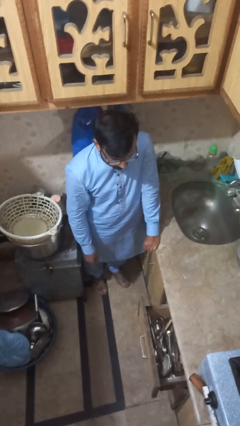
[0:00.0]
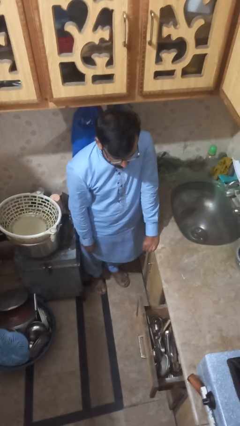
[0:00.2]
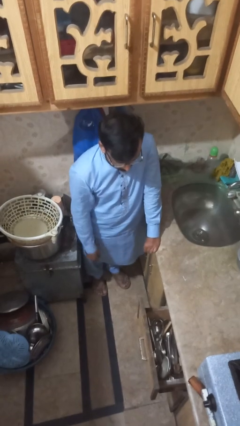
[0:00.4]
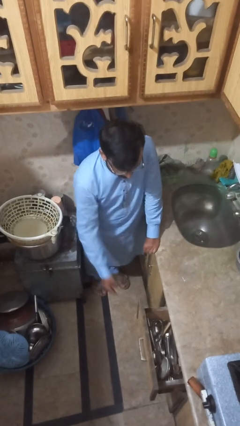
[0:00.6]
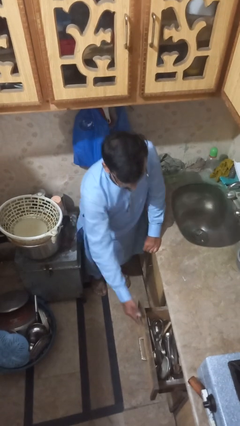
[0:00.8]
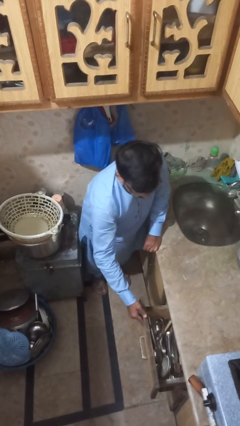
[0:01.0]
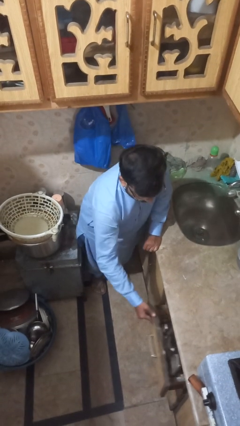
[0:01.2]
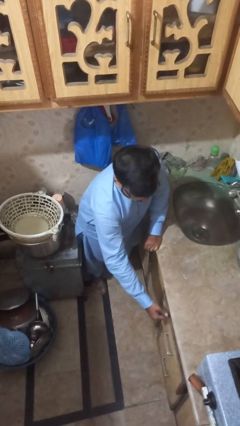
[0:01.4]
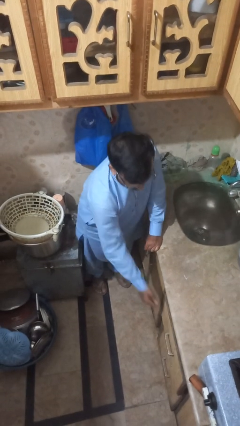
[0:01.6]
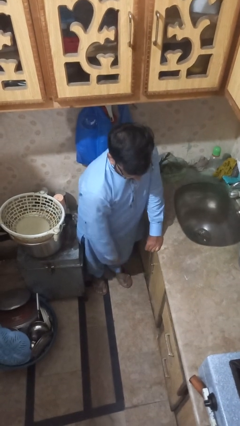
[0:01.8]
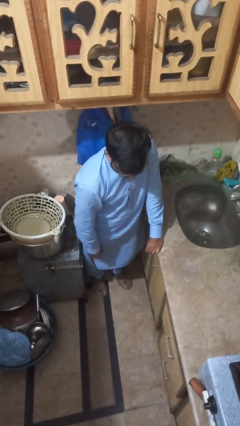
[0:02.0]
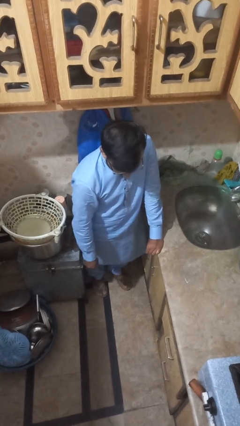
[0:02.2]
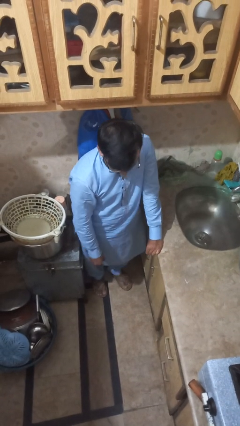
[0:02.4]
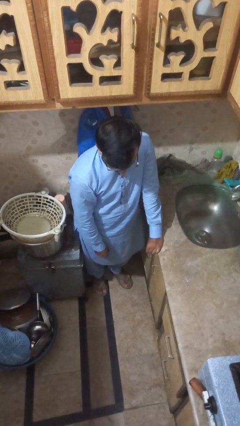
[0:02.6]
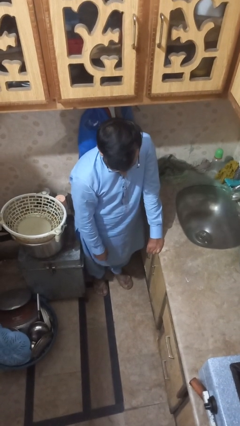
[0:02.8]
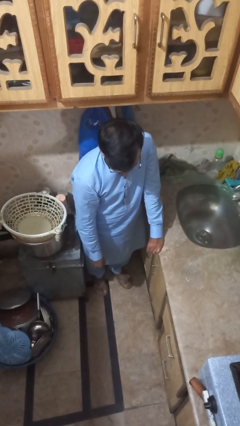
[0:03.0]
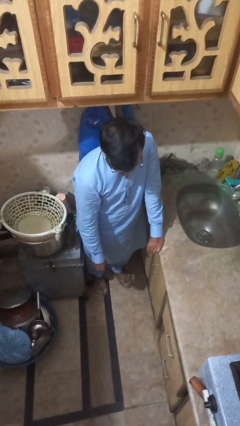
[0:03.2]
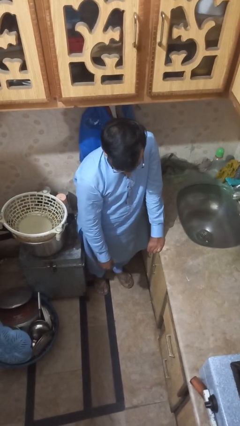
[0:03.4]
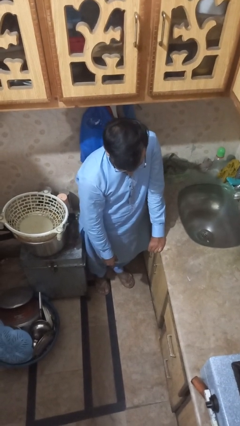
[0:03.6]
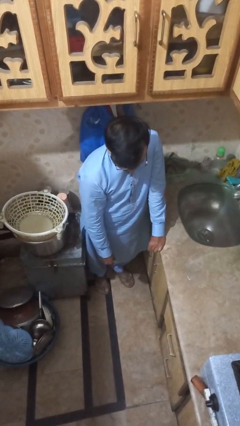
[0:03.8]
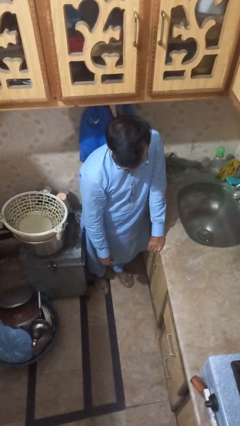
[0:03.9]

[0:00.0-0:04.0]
person closes kitchen drawer

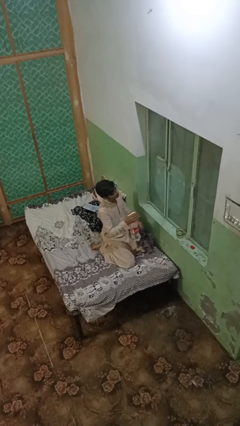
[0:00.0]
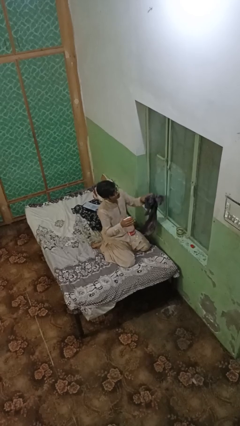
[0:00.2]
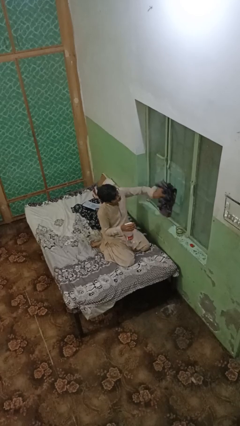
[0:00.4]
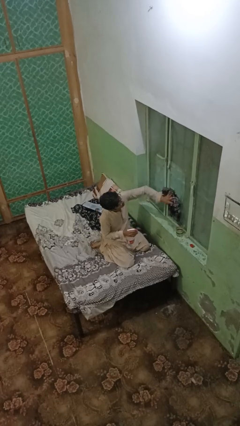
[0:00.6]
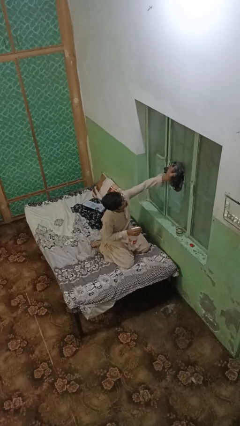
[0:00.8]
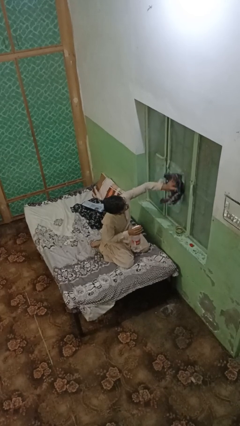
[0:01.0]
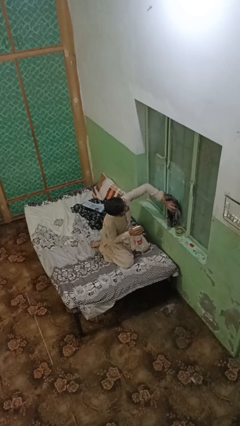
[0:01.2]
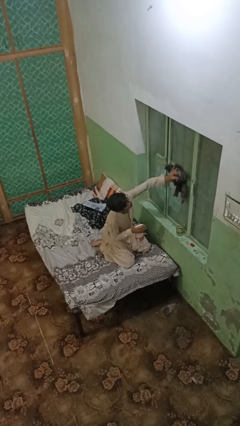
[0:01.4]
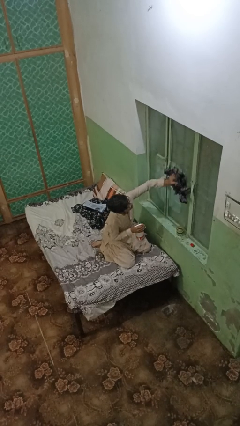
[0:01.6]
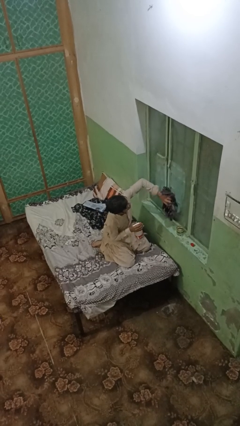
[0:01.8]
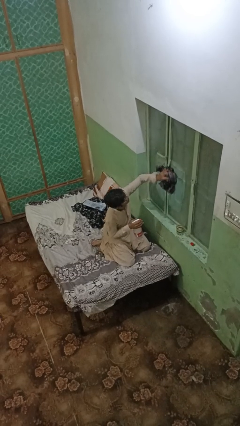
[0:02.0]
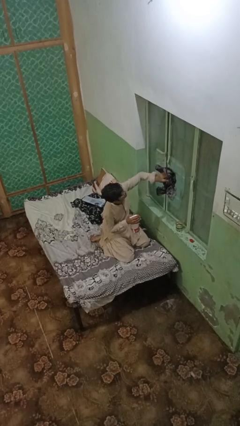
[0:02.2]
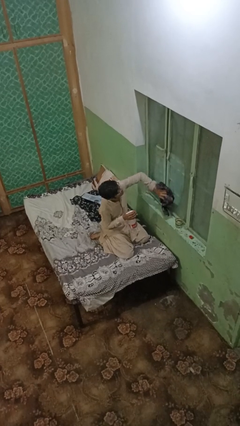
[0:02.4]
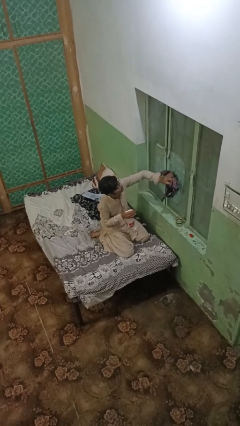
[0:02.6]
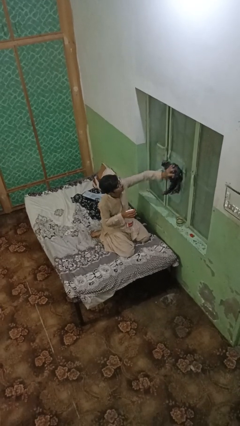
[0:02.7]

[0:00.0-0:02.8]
person washes window

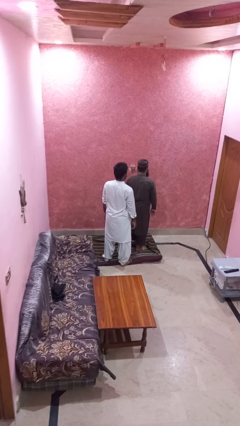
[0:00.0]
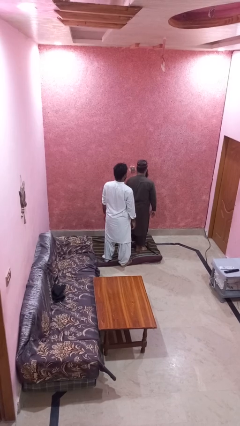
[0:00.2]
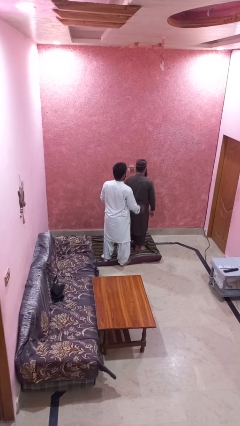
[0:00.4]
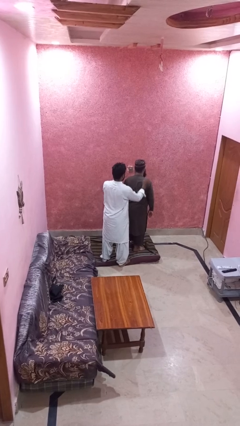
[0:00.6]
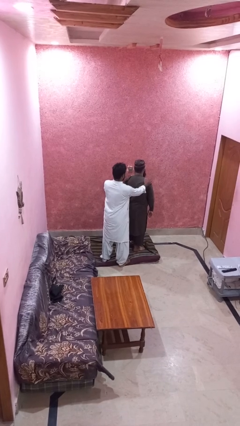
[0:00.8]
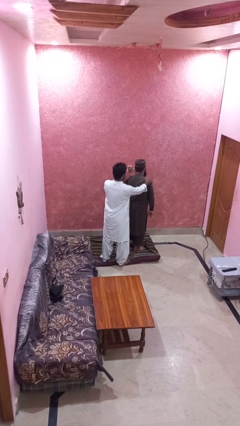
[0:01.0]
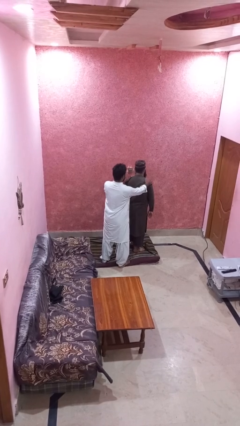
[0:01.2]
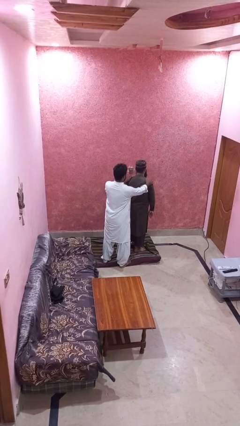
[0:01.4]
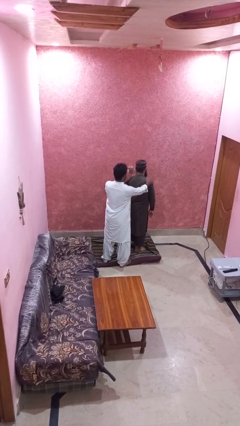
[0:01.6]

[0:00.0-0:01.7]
person grabs person by shoulder

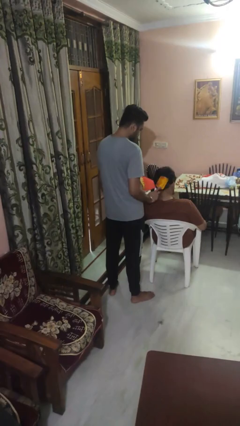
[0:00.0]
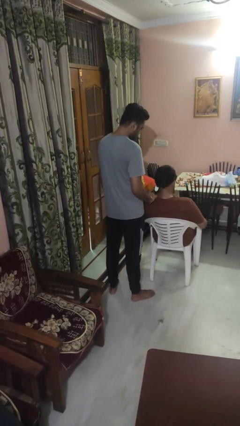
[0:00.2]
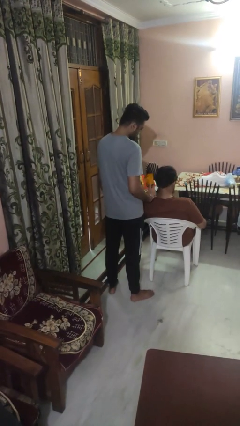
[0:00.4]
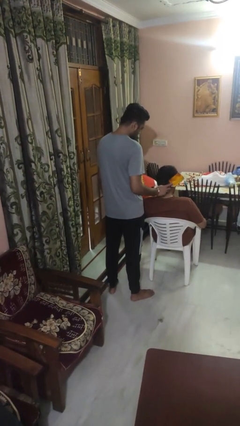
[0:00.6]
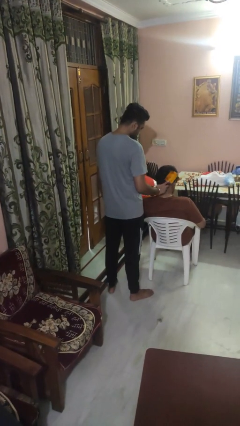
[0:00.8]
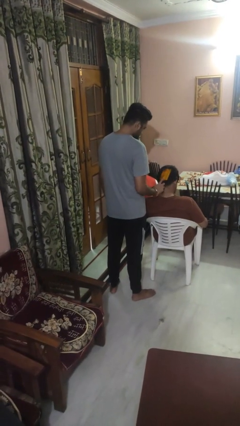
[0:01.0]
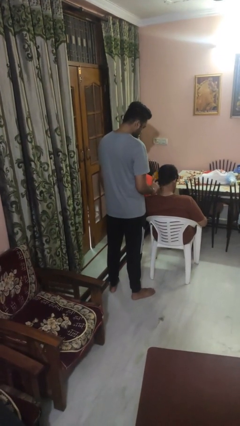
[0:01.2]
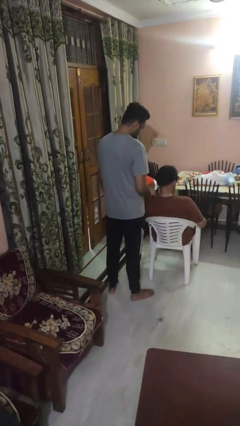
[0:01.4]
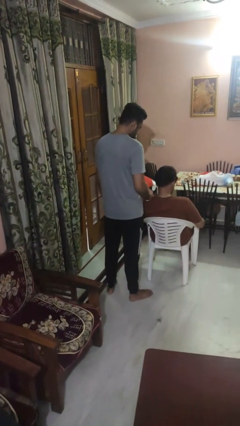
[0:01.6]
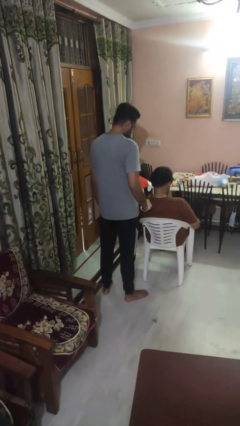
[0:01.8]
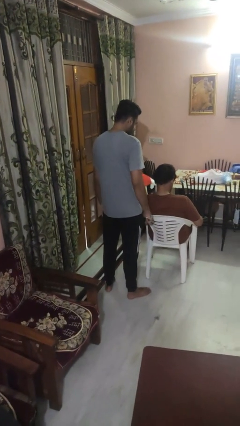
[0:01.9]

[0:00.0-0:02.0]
person brushes hair of person

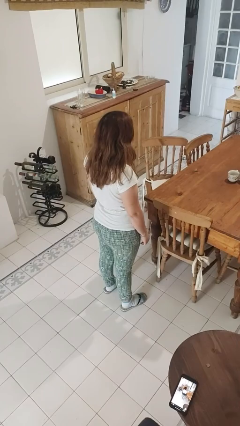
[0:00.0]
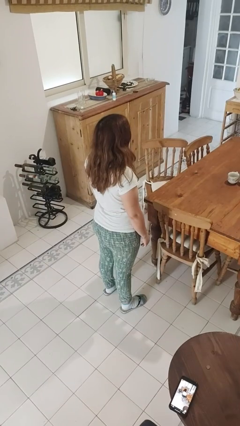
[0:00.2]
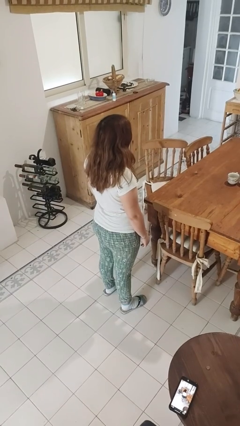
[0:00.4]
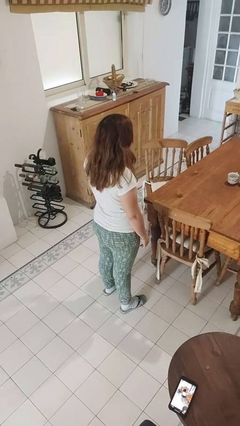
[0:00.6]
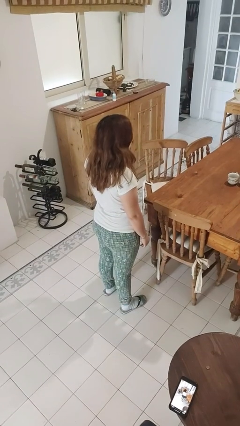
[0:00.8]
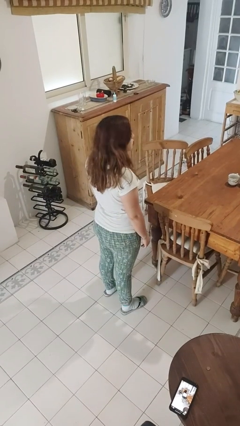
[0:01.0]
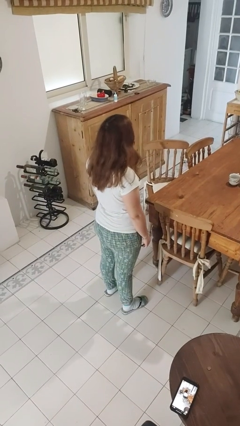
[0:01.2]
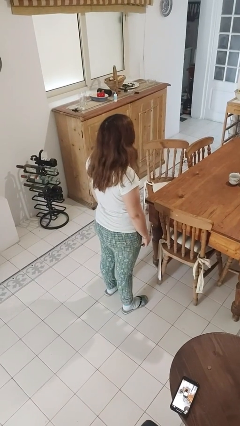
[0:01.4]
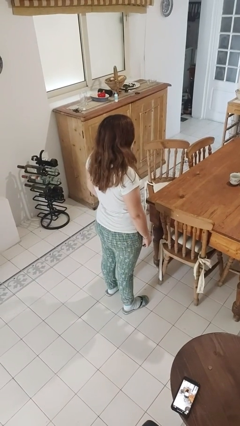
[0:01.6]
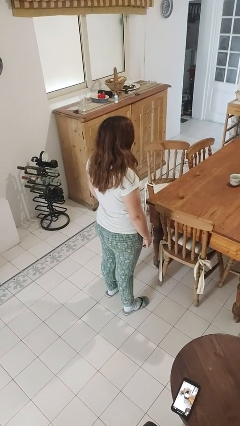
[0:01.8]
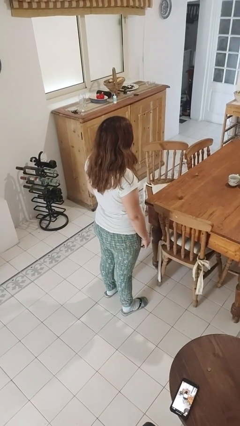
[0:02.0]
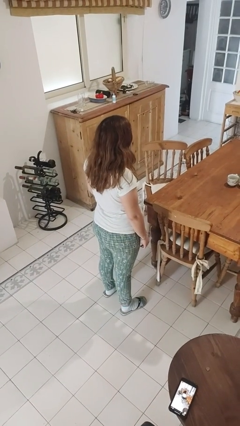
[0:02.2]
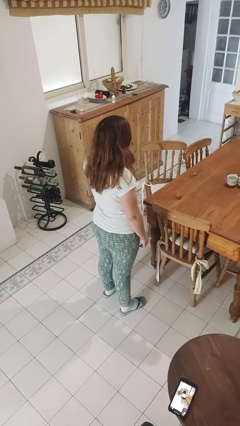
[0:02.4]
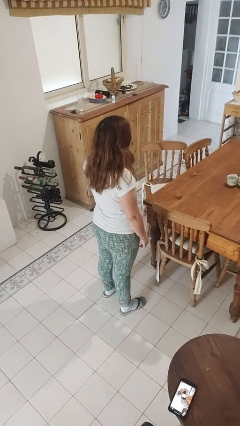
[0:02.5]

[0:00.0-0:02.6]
person shakes head

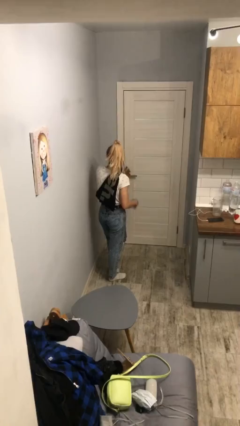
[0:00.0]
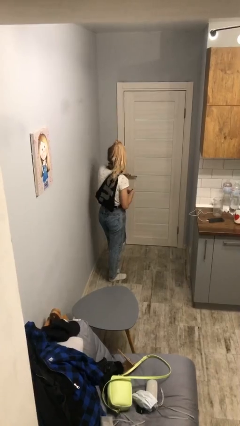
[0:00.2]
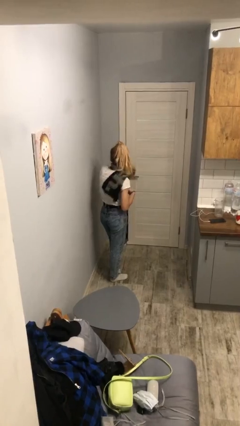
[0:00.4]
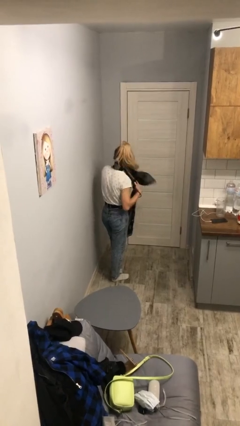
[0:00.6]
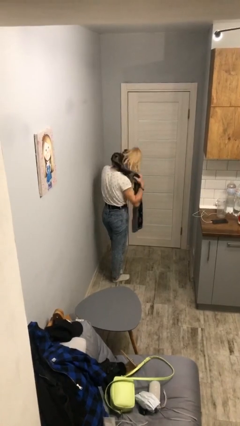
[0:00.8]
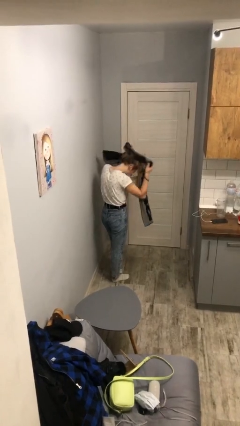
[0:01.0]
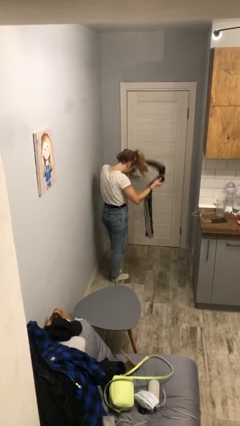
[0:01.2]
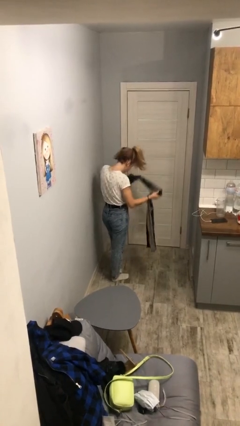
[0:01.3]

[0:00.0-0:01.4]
person takes off scarf

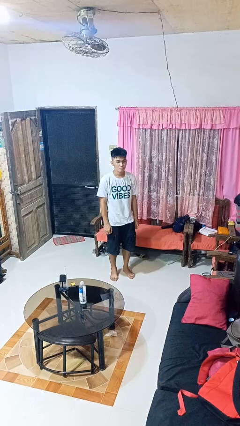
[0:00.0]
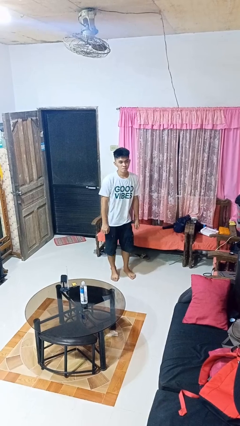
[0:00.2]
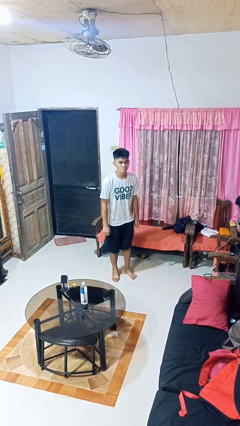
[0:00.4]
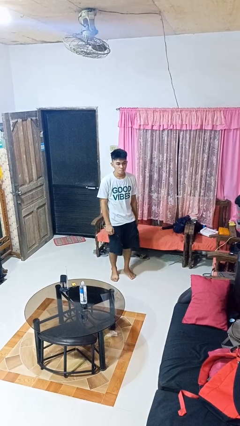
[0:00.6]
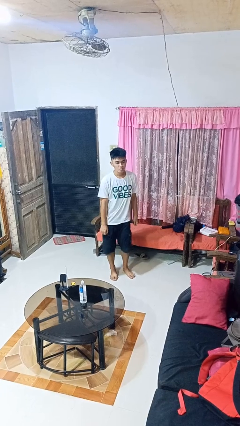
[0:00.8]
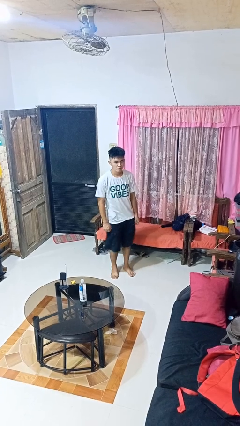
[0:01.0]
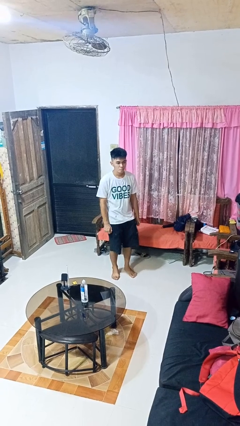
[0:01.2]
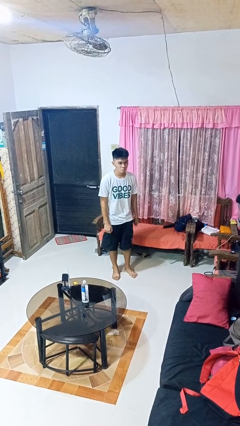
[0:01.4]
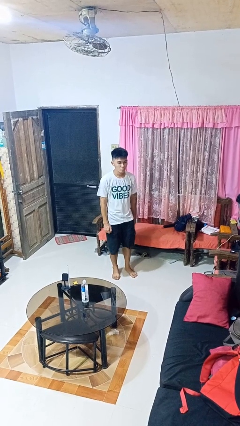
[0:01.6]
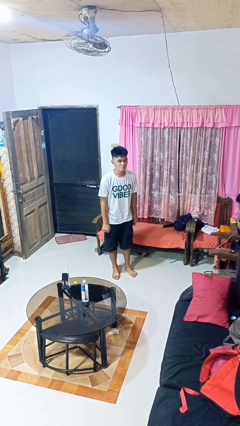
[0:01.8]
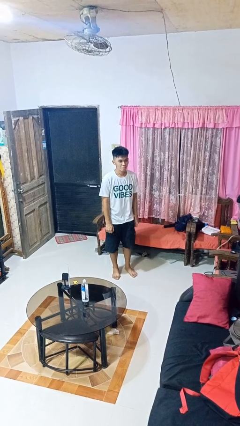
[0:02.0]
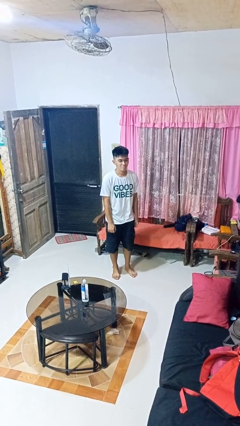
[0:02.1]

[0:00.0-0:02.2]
person wiggles hips

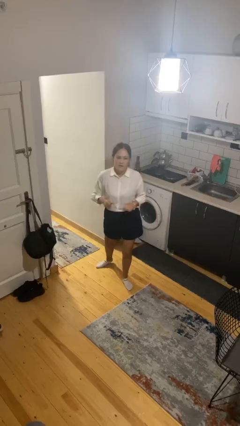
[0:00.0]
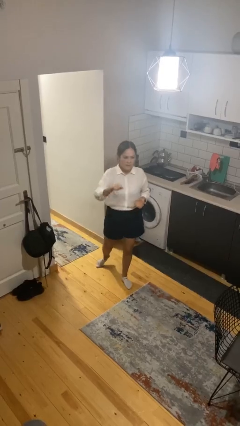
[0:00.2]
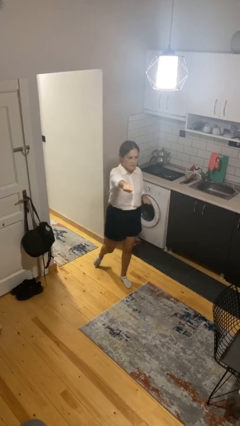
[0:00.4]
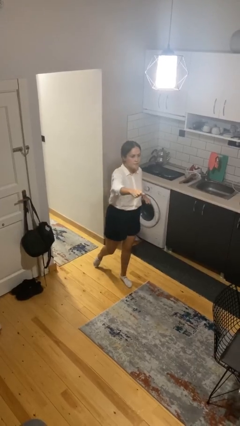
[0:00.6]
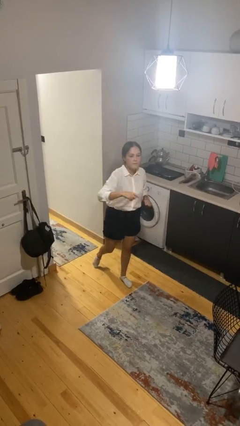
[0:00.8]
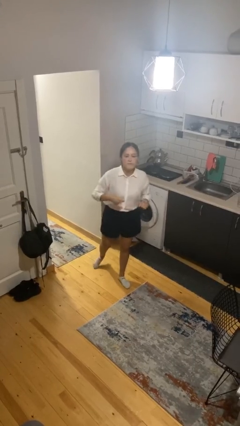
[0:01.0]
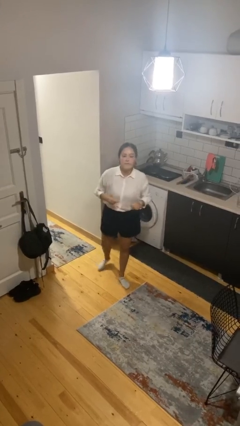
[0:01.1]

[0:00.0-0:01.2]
person karate chop
